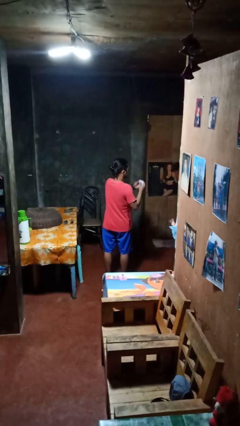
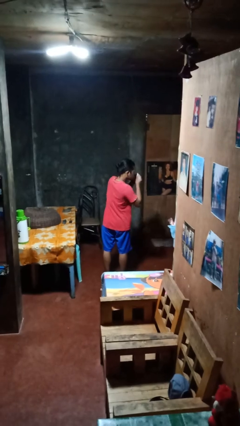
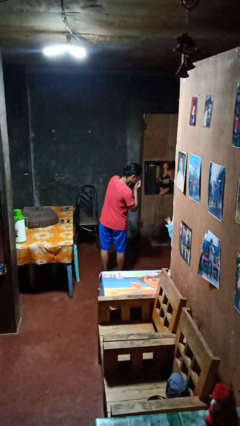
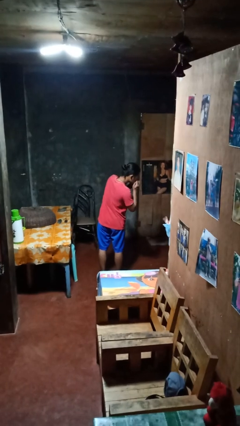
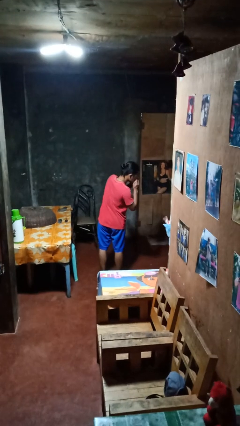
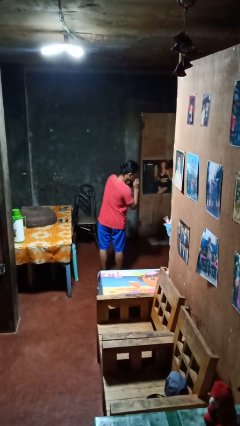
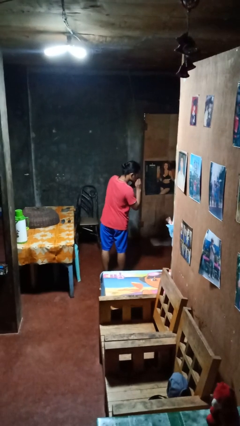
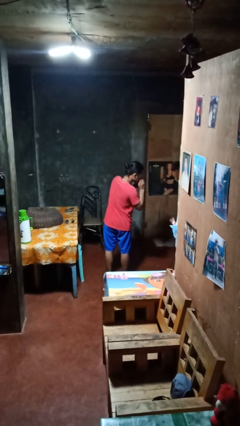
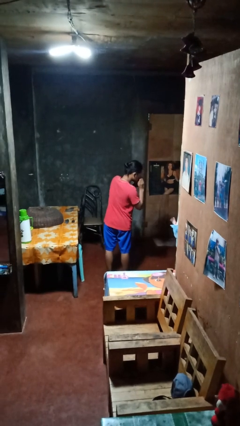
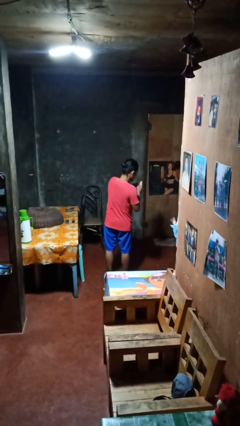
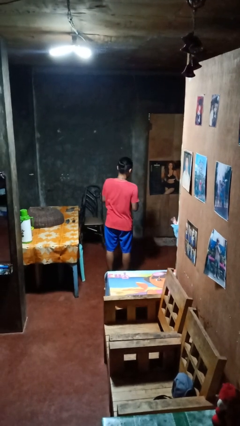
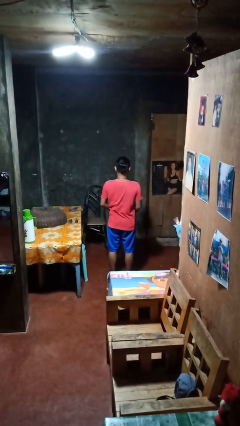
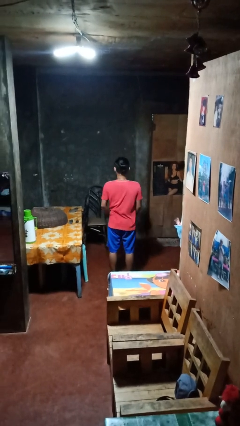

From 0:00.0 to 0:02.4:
person blows nose

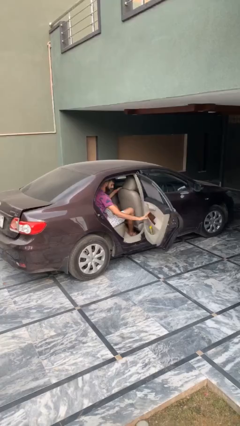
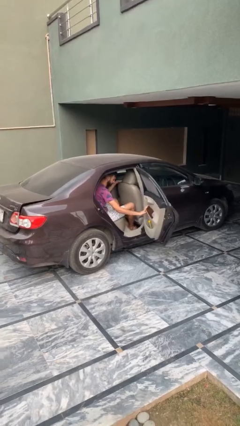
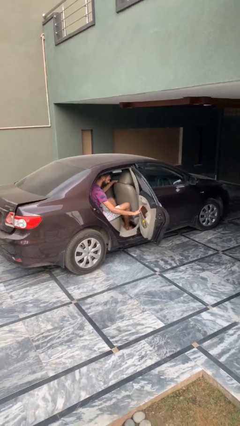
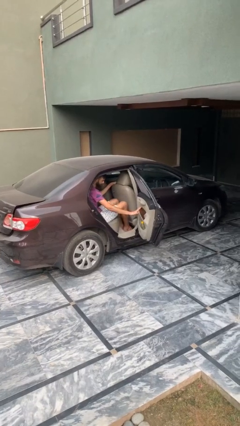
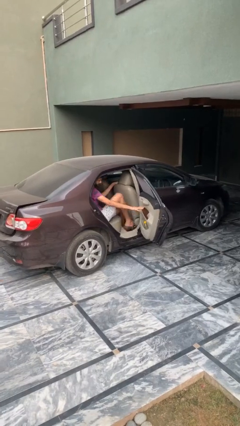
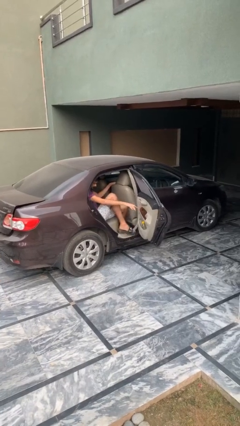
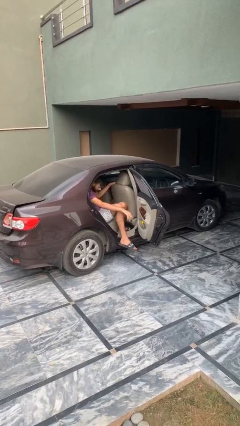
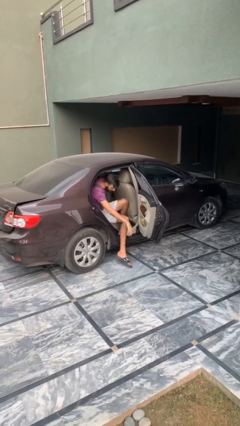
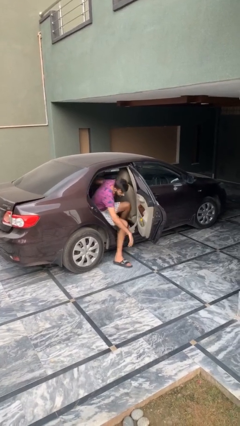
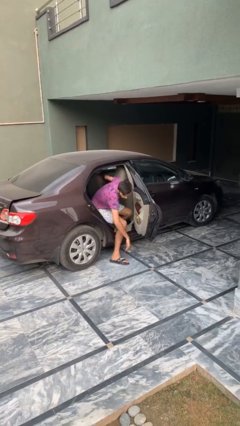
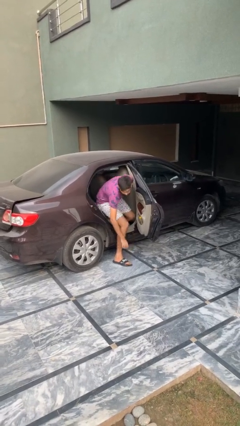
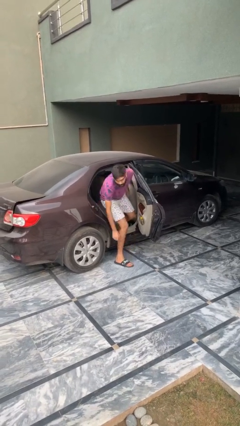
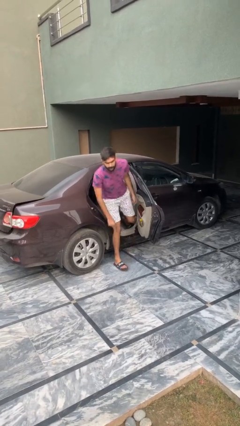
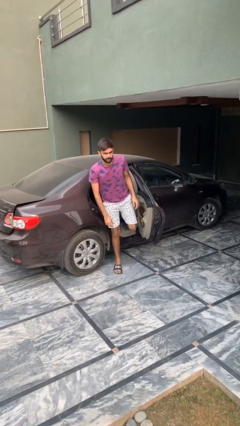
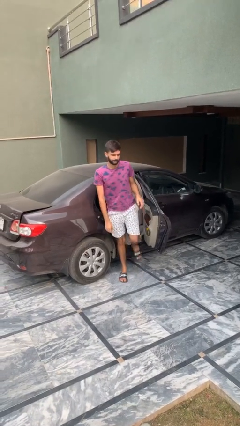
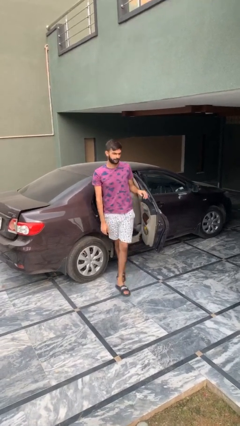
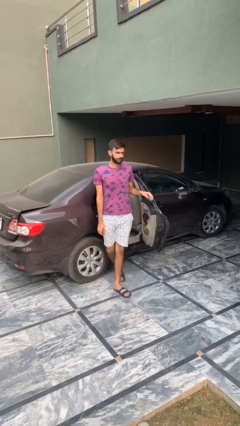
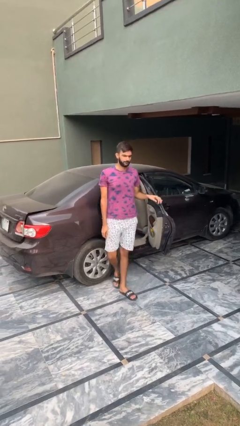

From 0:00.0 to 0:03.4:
person exits car

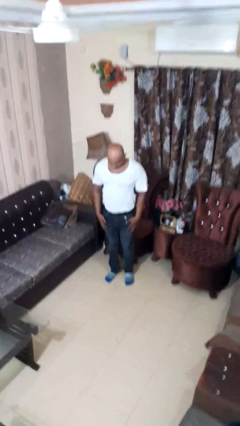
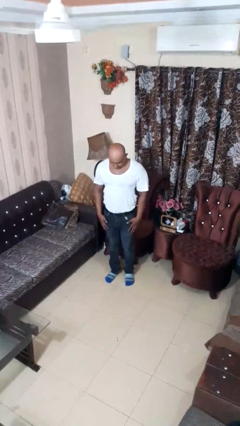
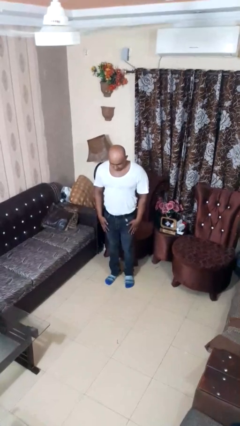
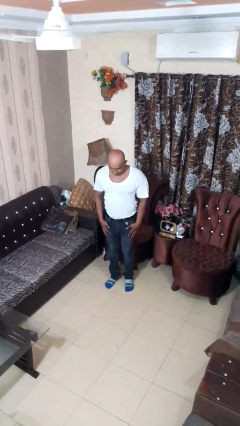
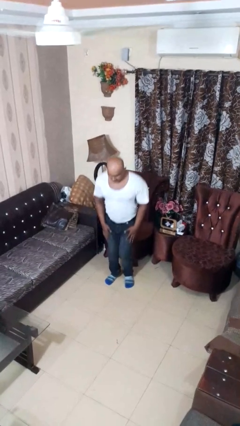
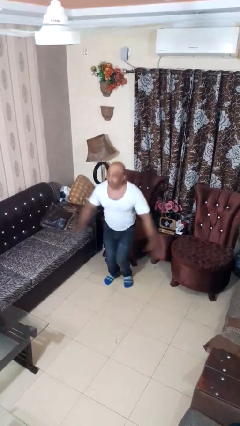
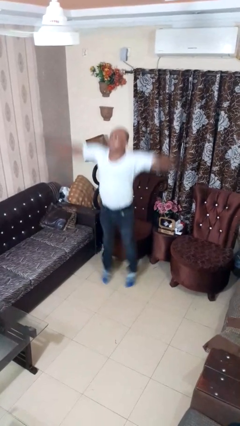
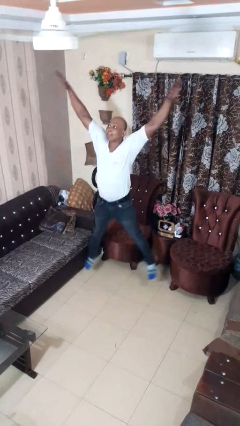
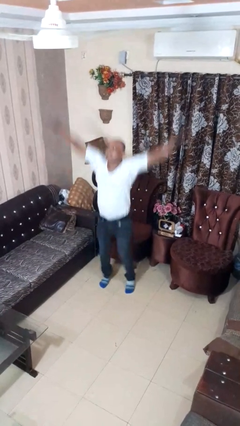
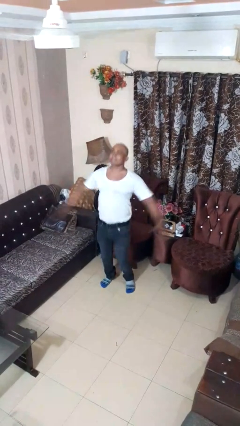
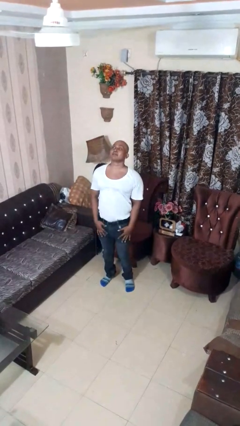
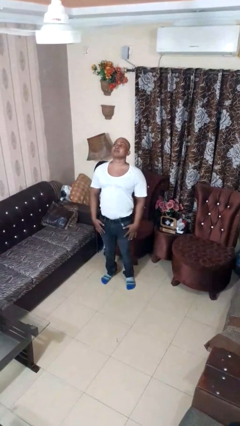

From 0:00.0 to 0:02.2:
person exercises with jumping jacks

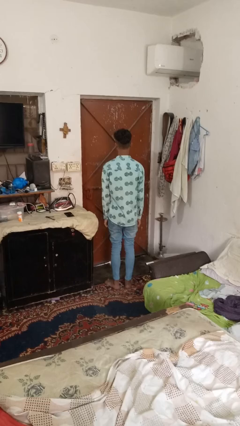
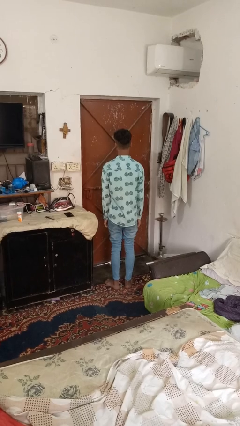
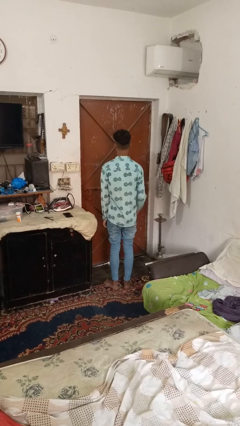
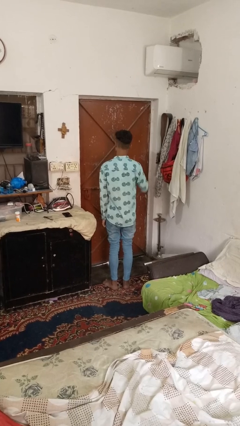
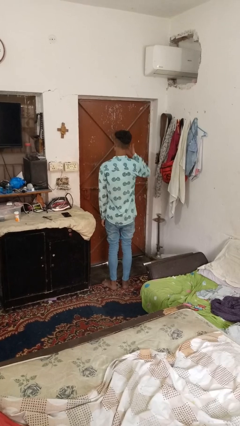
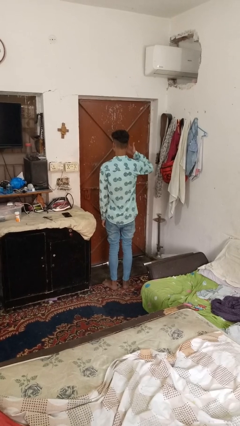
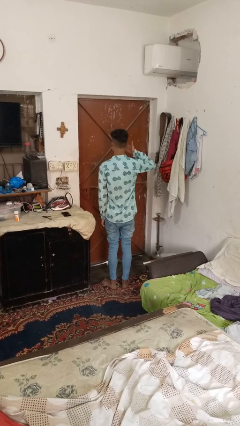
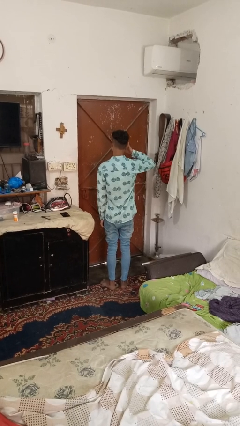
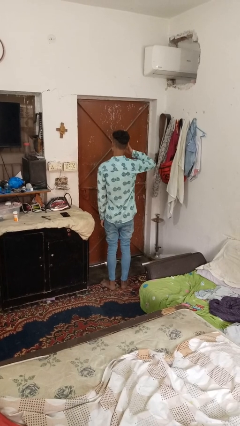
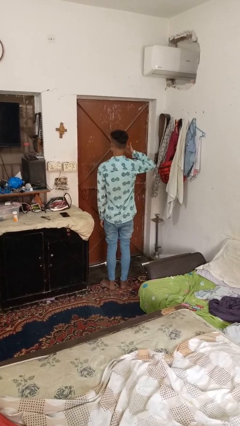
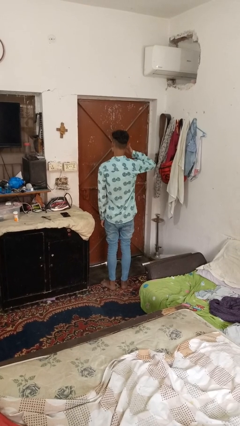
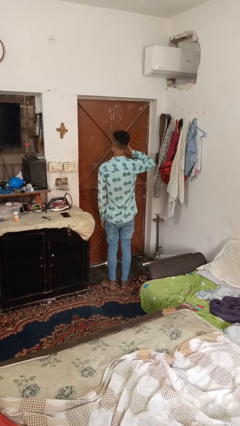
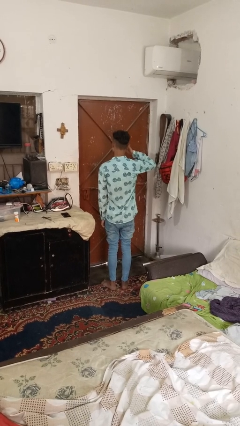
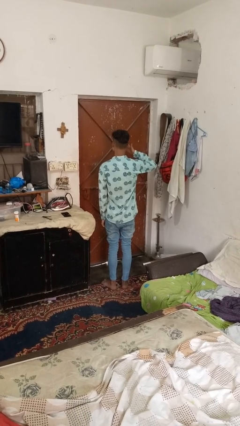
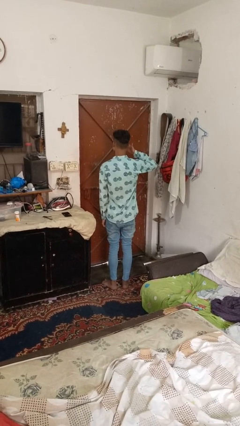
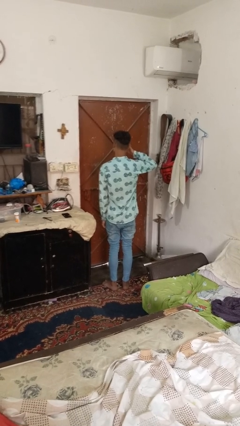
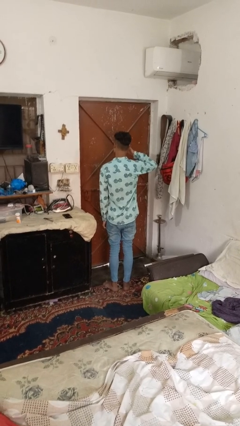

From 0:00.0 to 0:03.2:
person rubs eyes

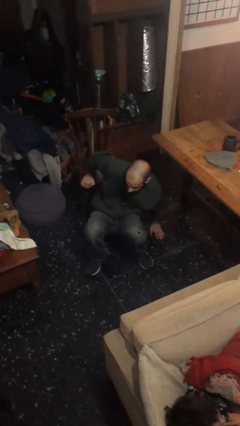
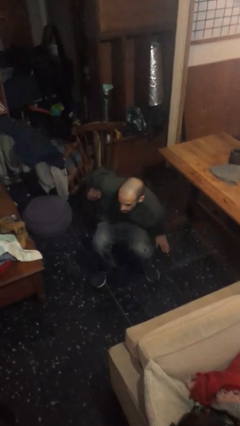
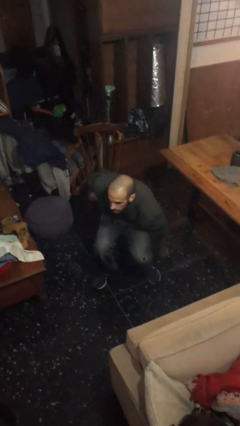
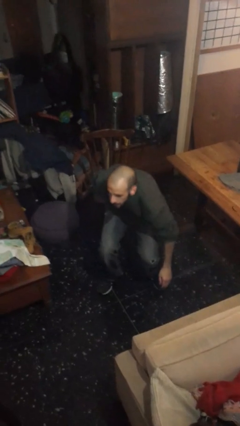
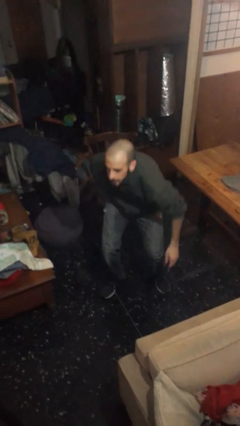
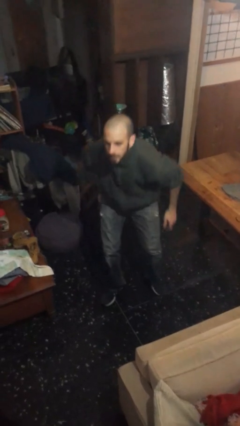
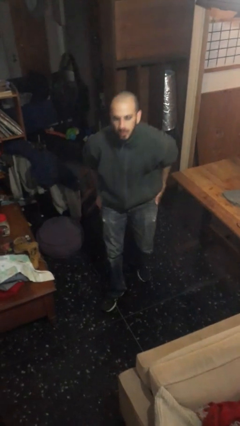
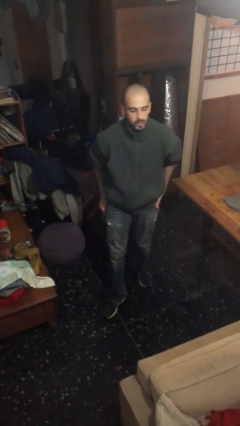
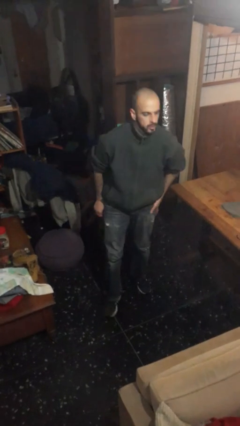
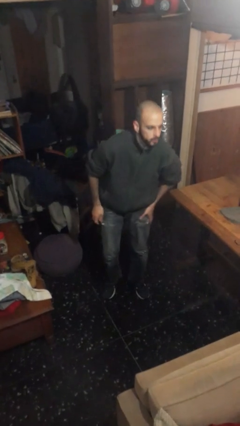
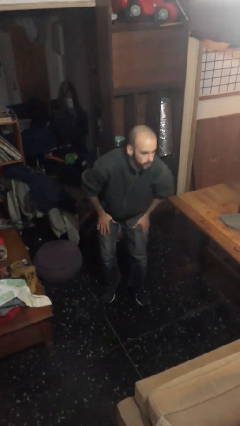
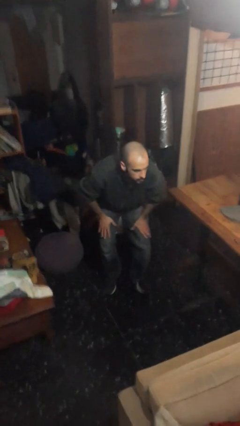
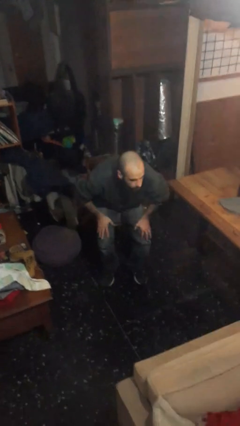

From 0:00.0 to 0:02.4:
person stands up from floor

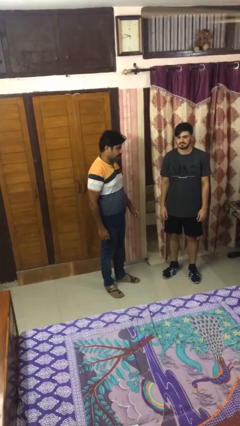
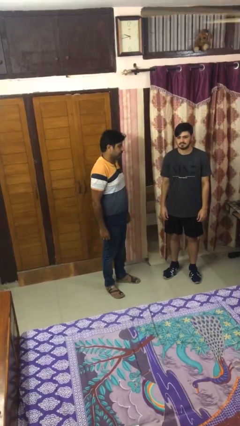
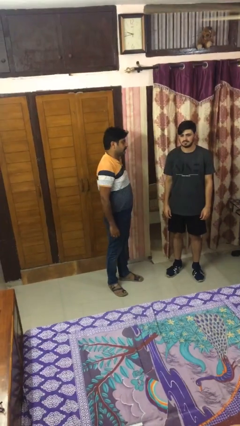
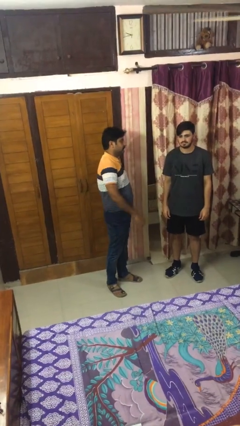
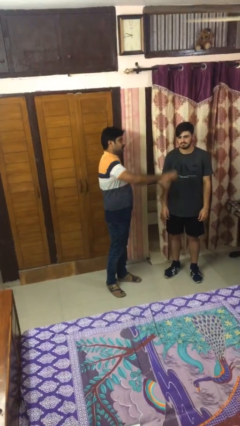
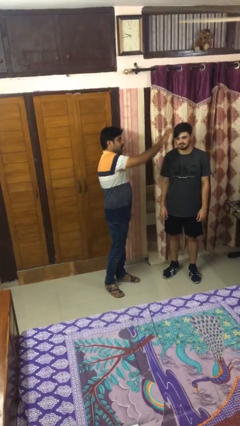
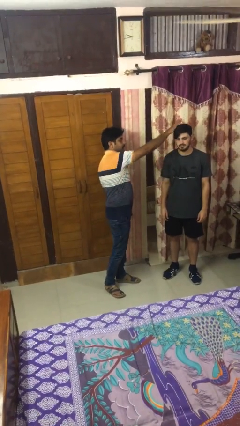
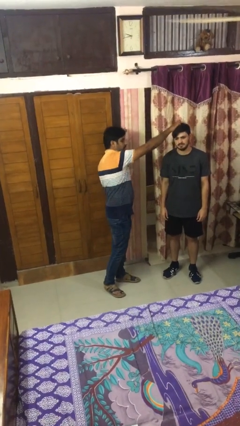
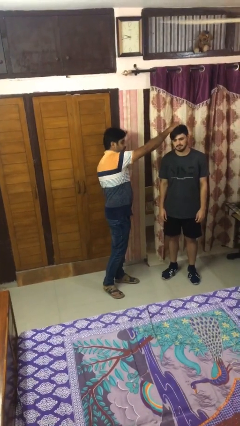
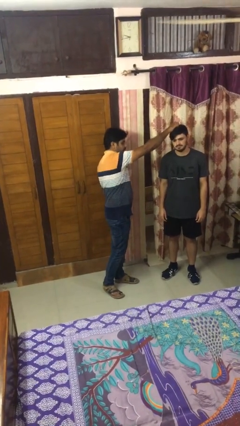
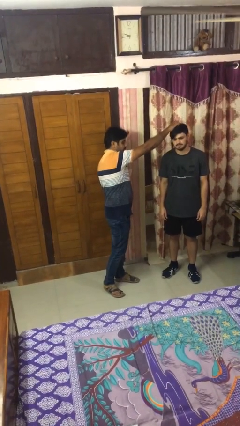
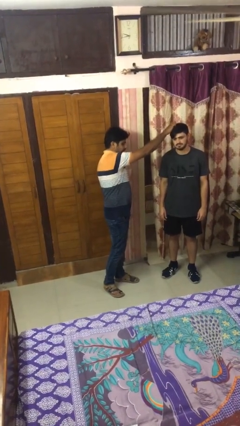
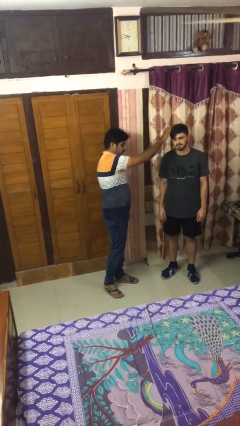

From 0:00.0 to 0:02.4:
person grabs person by hair

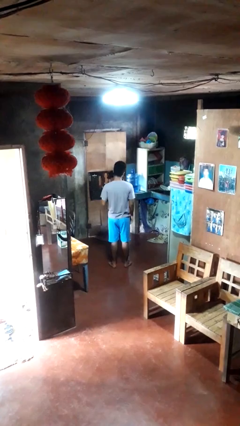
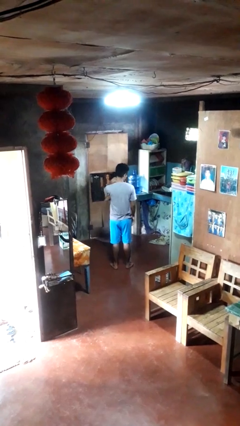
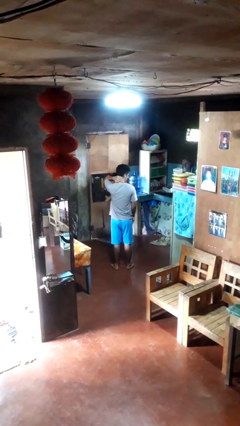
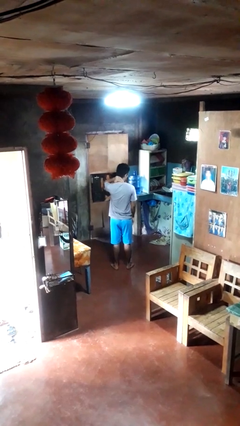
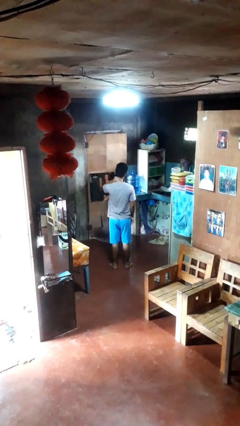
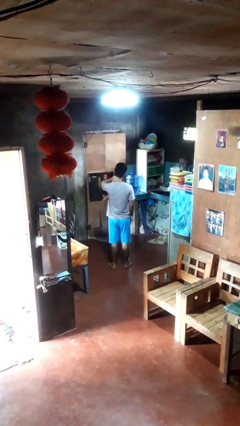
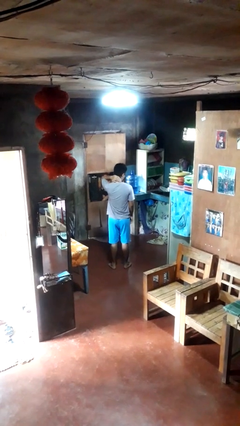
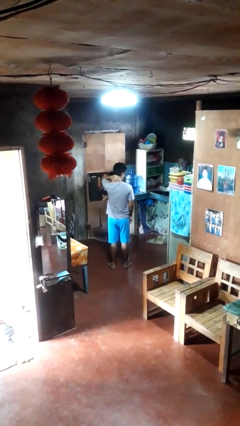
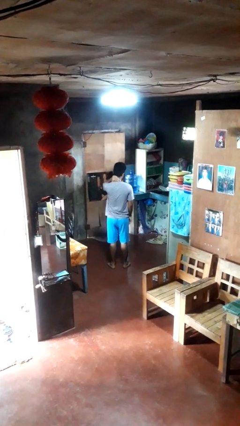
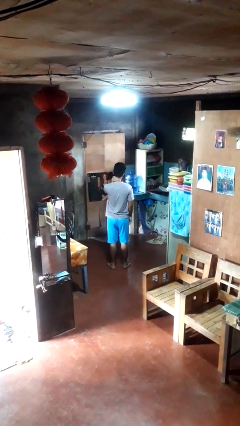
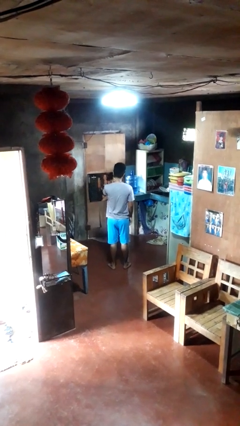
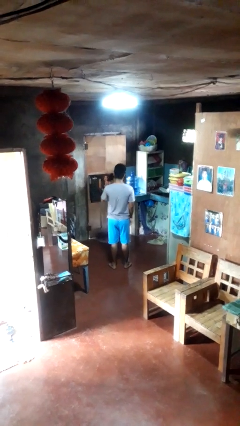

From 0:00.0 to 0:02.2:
person rubs neck
